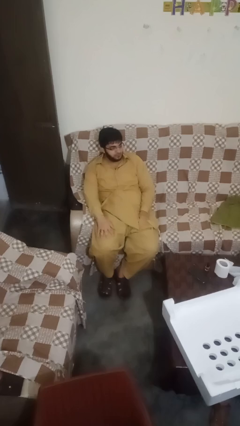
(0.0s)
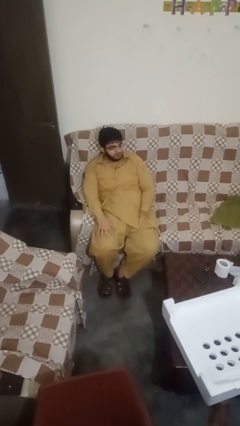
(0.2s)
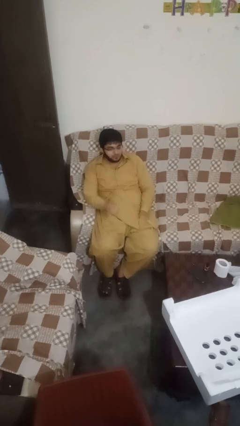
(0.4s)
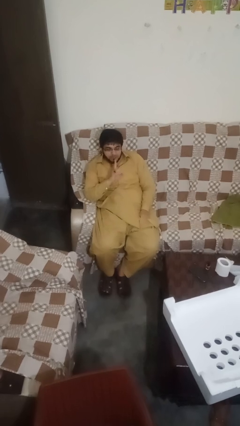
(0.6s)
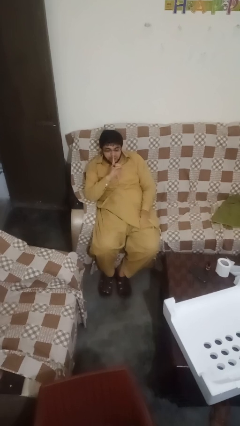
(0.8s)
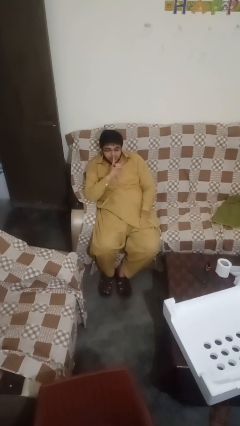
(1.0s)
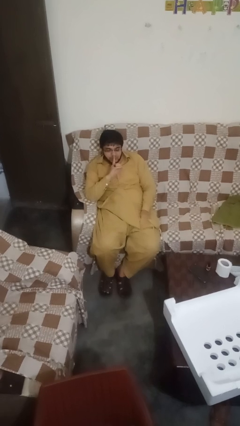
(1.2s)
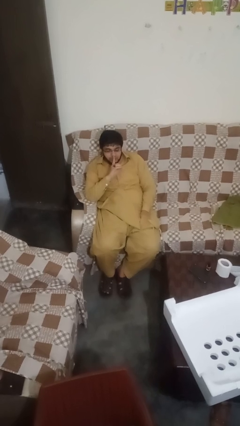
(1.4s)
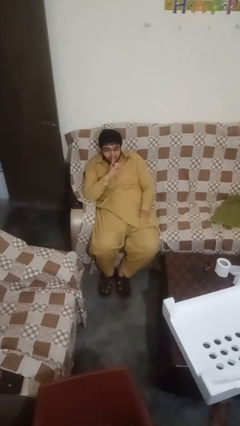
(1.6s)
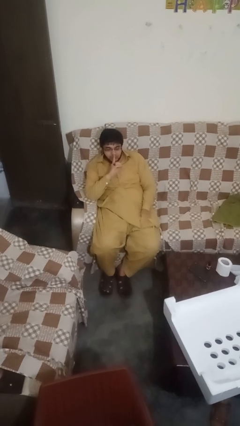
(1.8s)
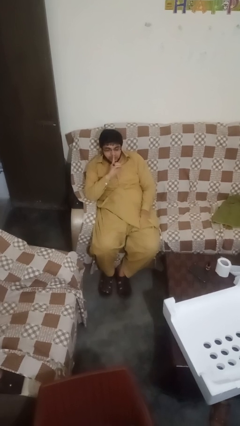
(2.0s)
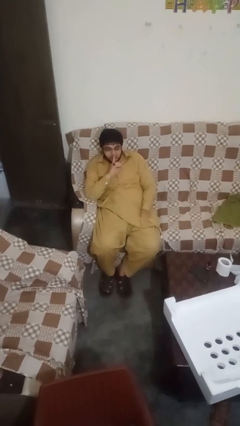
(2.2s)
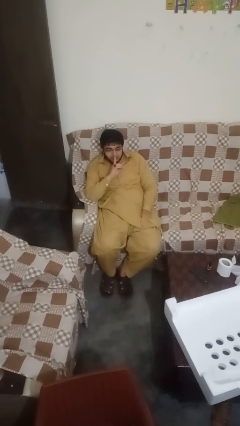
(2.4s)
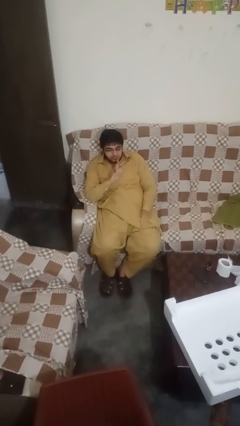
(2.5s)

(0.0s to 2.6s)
person gestures be quiet

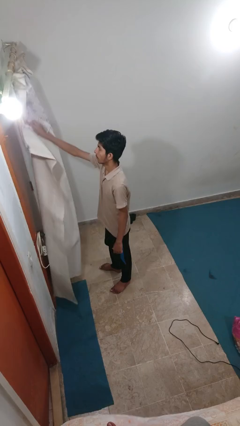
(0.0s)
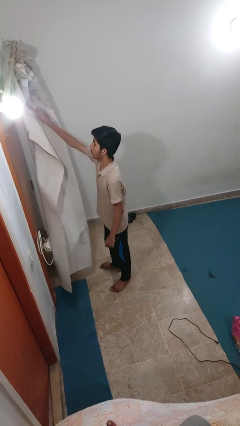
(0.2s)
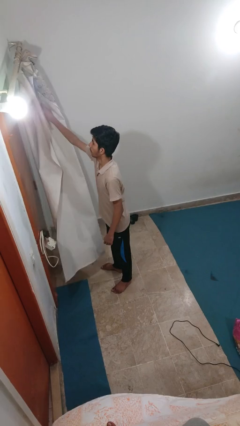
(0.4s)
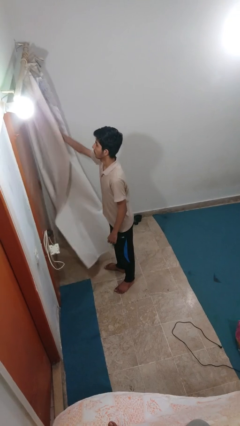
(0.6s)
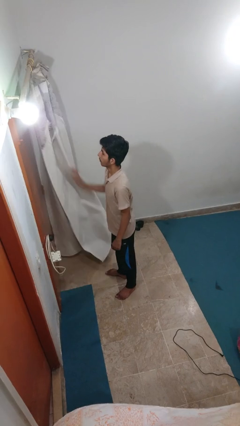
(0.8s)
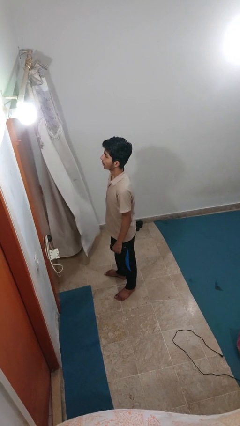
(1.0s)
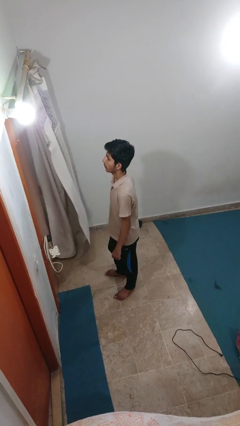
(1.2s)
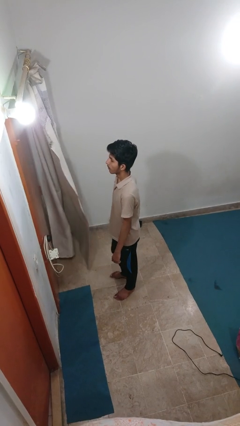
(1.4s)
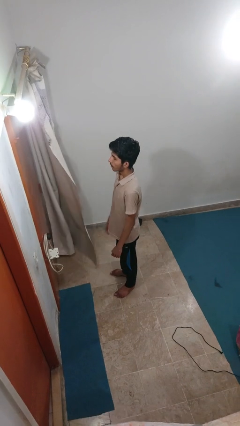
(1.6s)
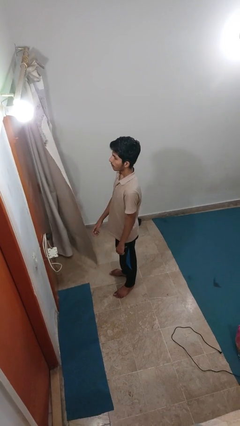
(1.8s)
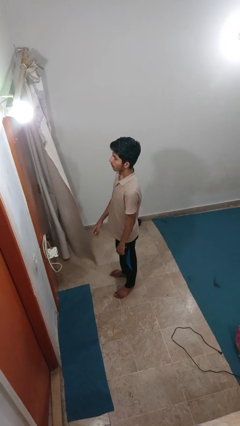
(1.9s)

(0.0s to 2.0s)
person opens curtains

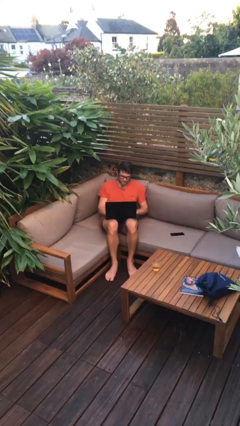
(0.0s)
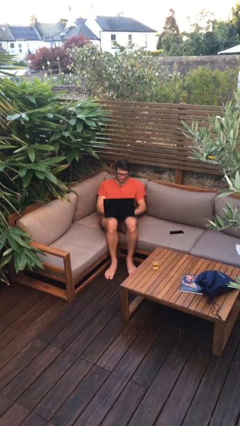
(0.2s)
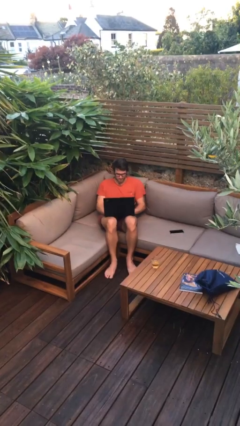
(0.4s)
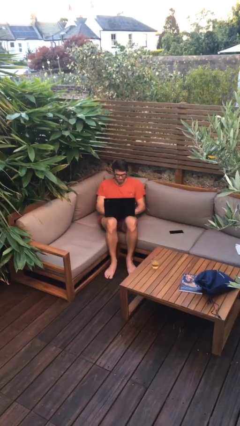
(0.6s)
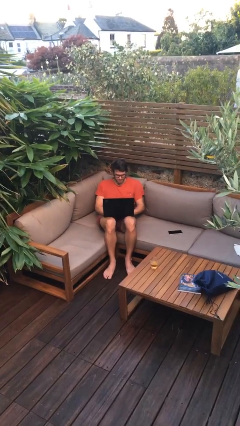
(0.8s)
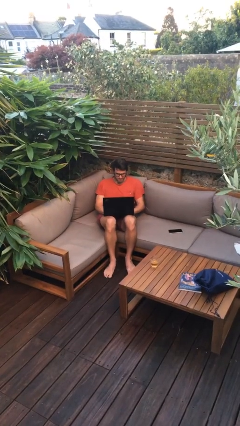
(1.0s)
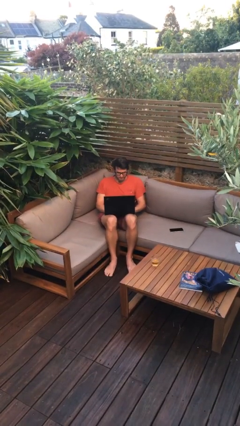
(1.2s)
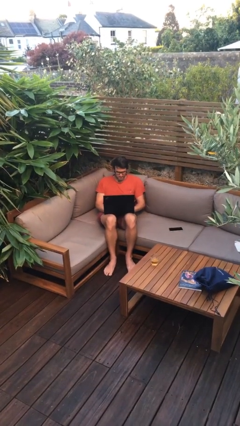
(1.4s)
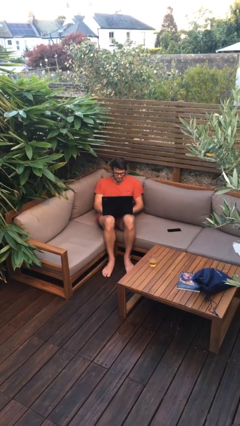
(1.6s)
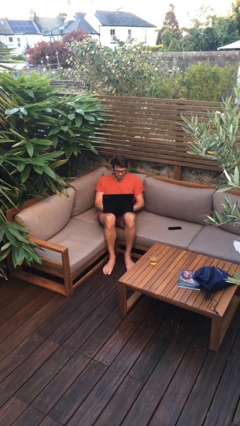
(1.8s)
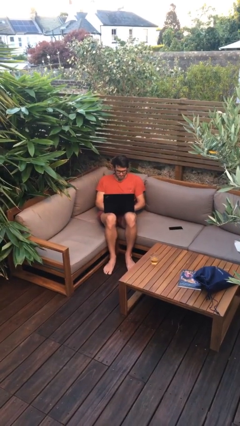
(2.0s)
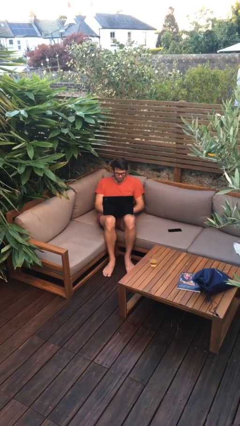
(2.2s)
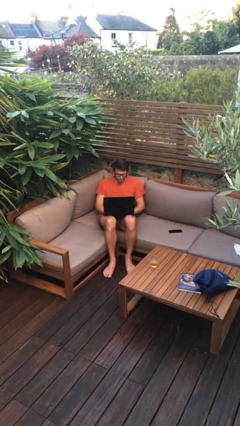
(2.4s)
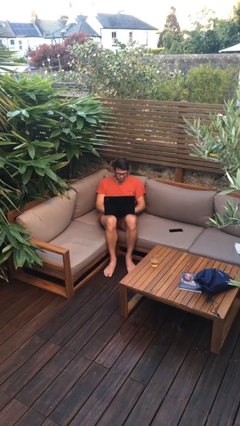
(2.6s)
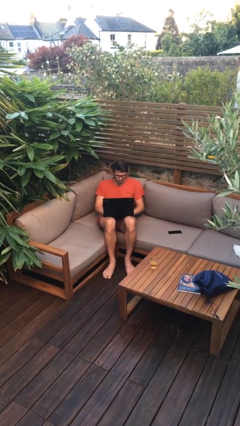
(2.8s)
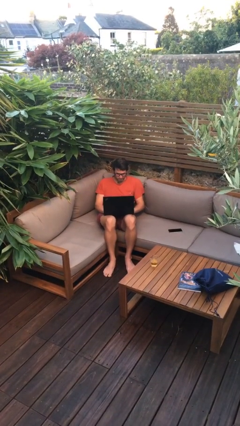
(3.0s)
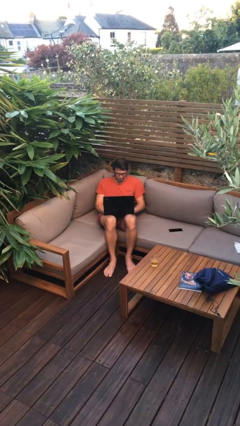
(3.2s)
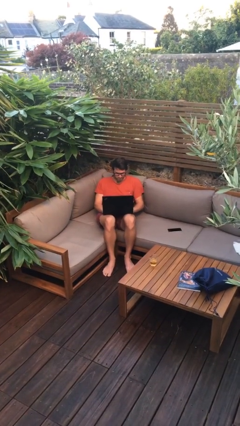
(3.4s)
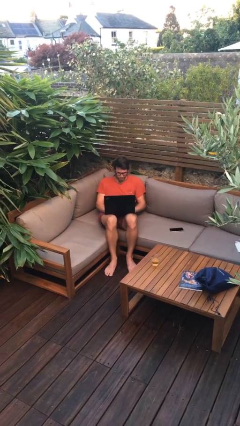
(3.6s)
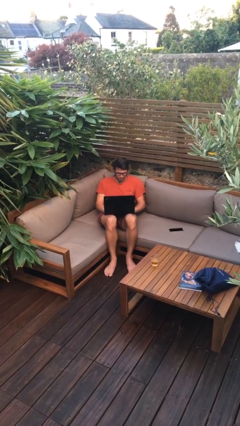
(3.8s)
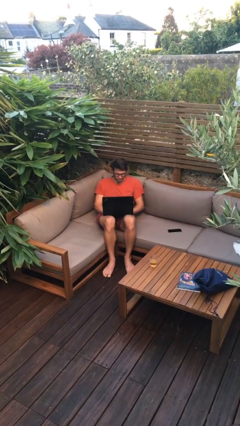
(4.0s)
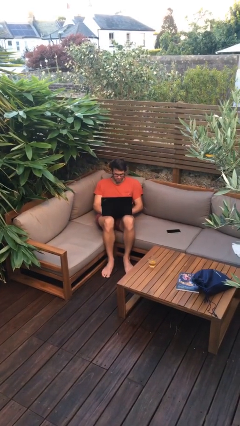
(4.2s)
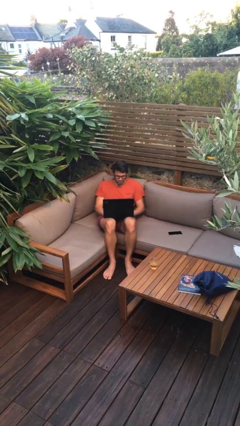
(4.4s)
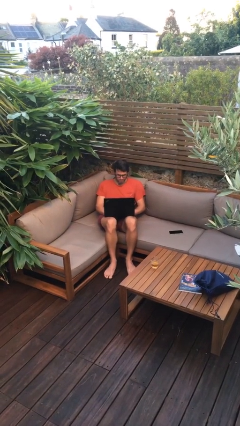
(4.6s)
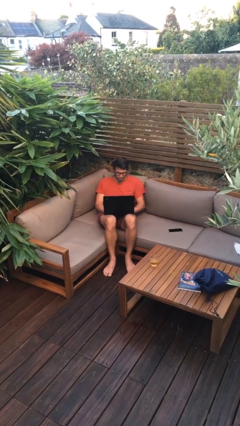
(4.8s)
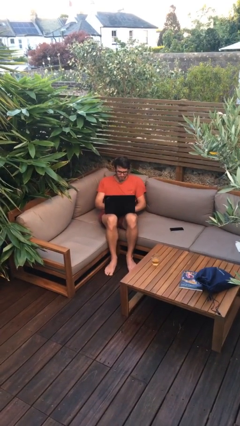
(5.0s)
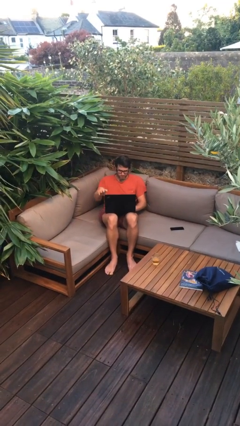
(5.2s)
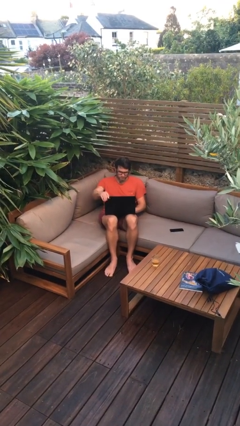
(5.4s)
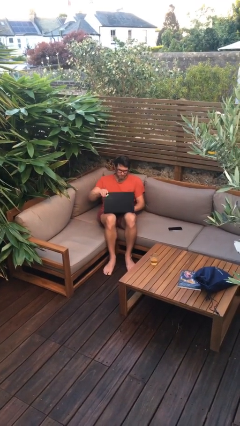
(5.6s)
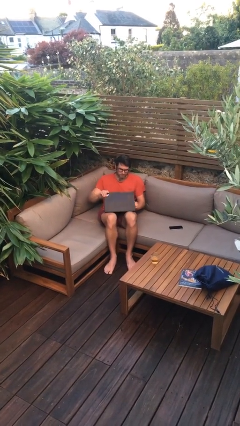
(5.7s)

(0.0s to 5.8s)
person interacts with laptop

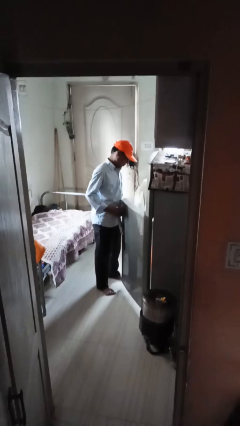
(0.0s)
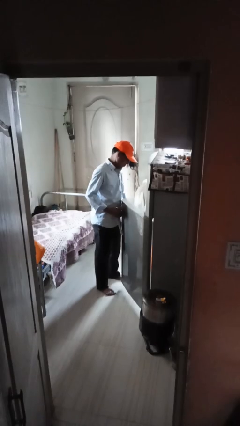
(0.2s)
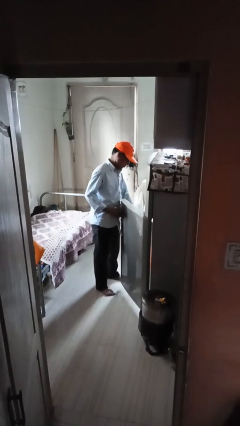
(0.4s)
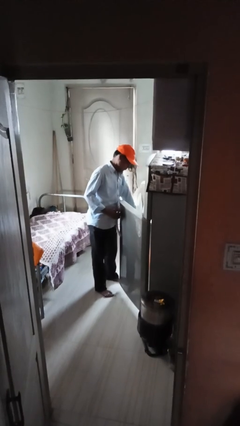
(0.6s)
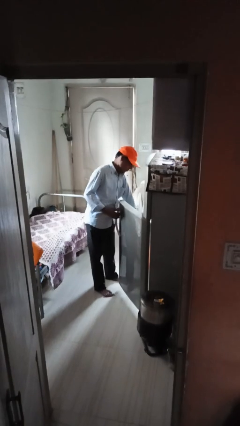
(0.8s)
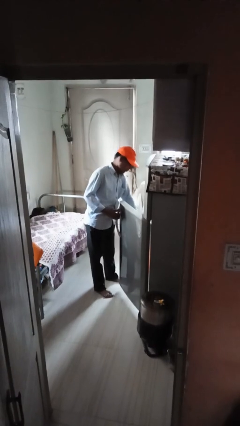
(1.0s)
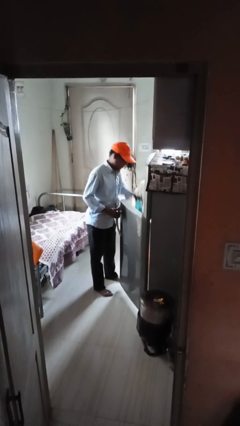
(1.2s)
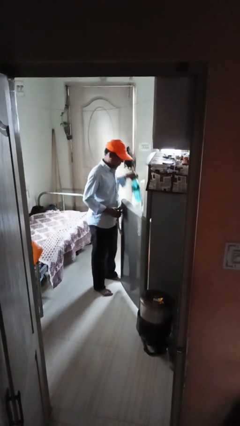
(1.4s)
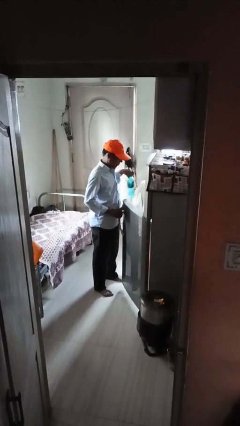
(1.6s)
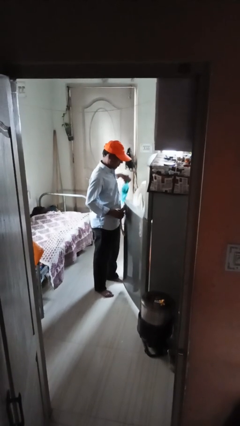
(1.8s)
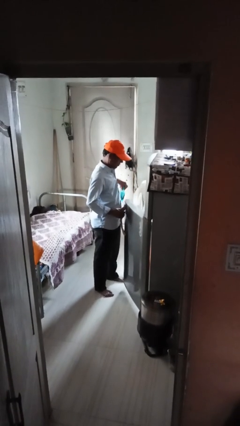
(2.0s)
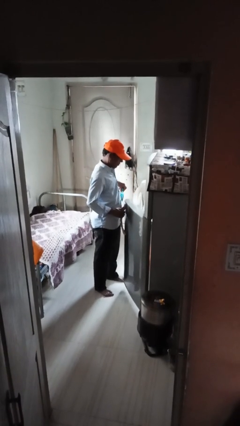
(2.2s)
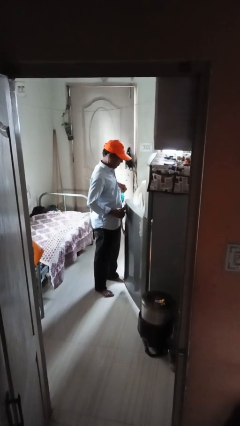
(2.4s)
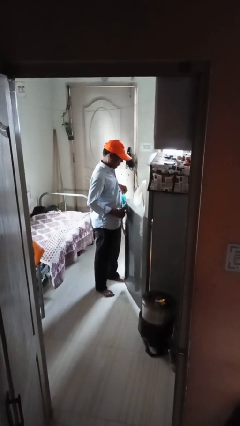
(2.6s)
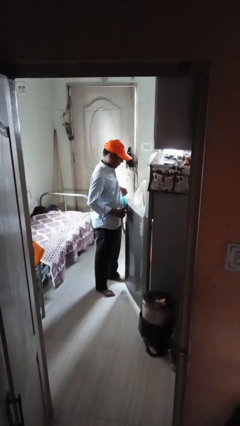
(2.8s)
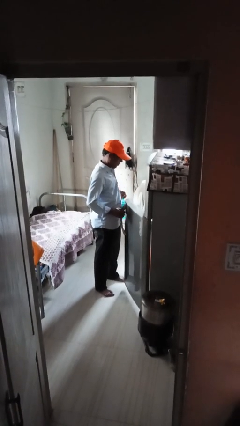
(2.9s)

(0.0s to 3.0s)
person takes object from refrigerator

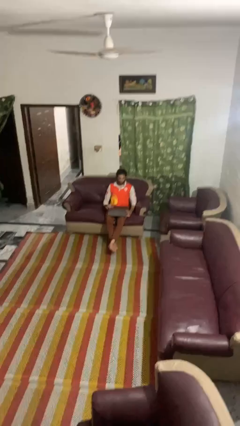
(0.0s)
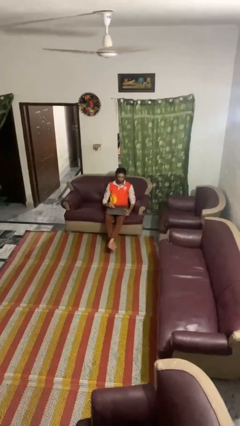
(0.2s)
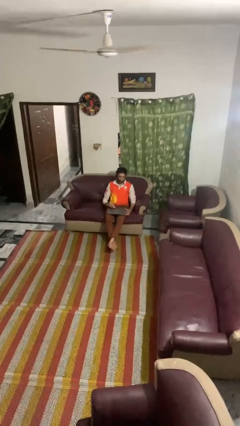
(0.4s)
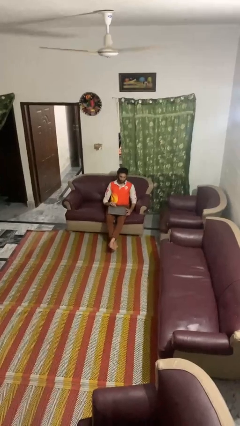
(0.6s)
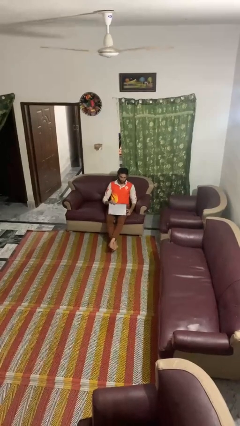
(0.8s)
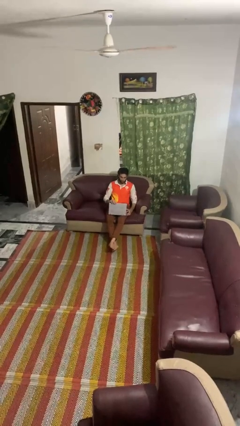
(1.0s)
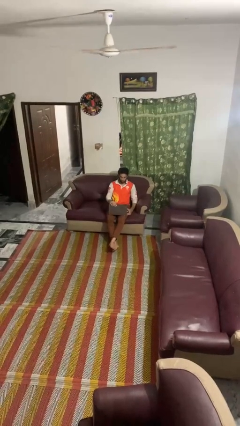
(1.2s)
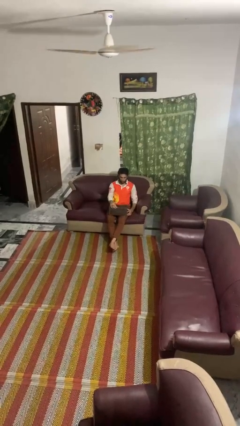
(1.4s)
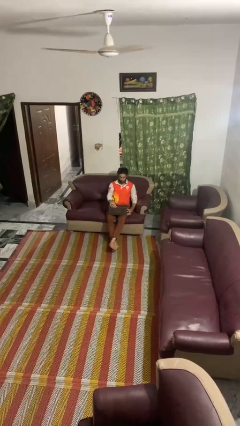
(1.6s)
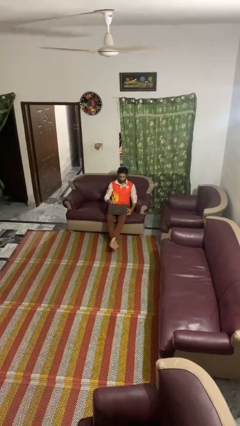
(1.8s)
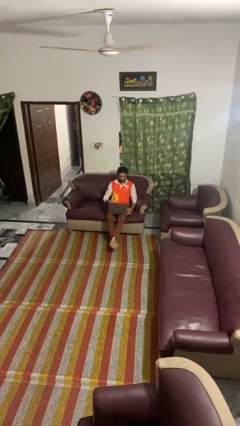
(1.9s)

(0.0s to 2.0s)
person opens laptop

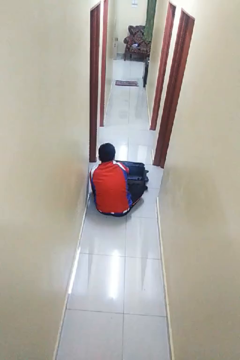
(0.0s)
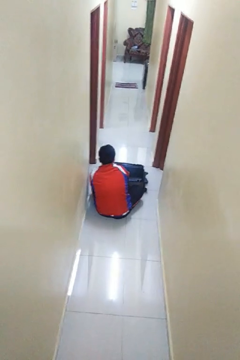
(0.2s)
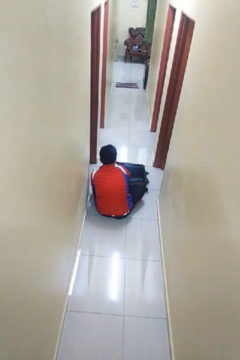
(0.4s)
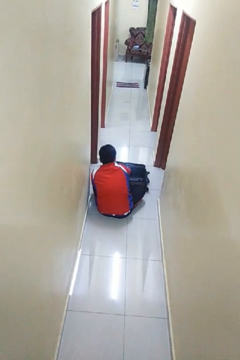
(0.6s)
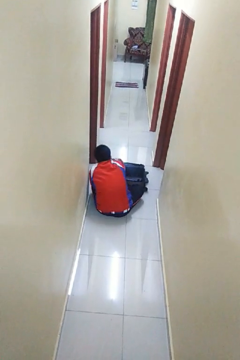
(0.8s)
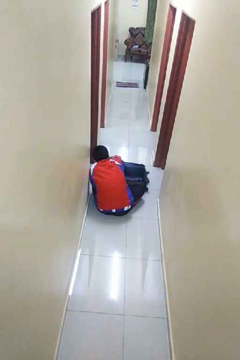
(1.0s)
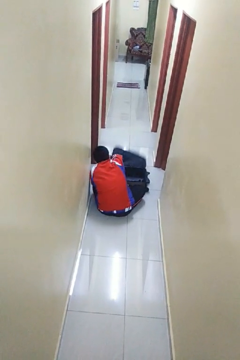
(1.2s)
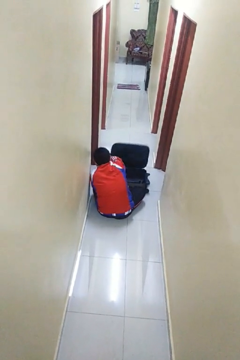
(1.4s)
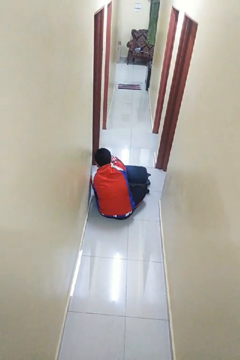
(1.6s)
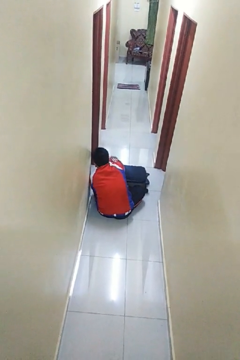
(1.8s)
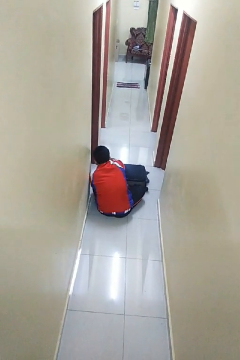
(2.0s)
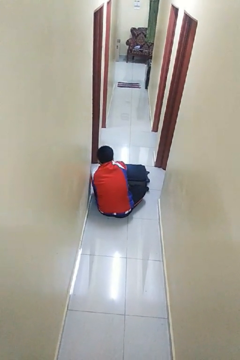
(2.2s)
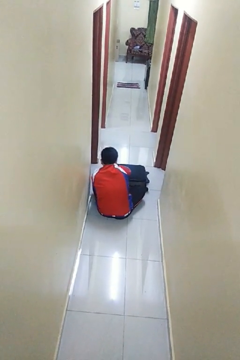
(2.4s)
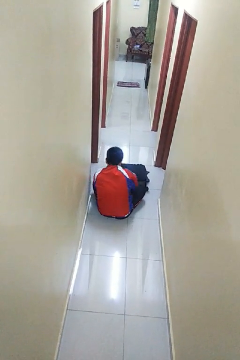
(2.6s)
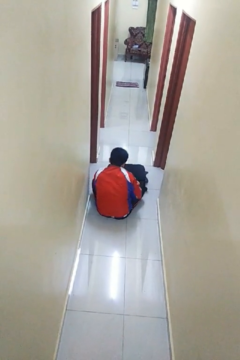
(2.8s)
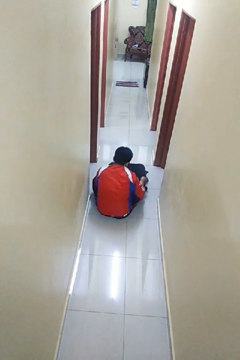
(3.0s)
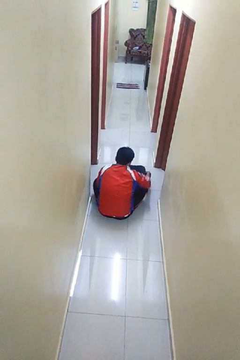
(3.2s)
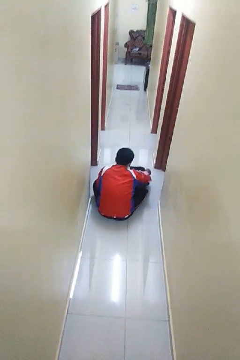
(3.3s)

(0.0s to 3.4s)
person closes suitcase
